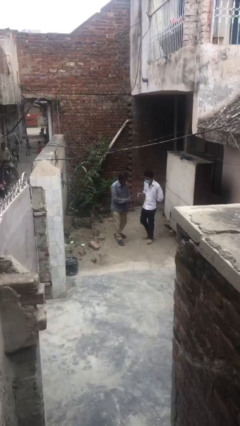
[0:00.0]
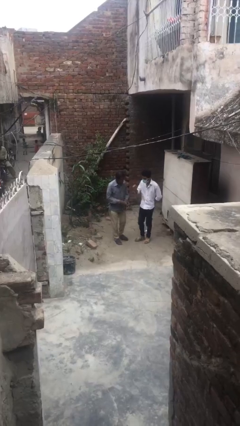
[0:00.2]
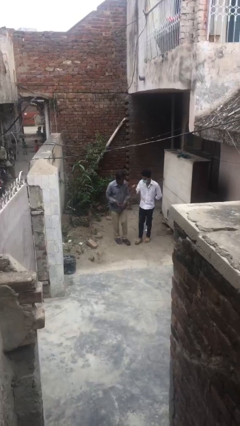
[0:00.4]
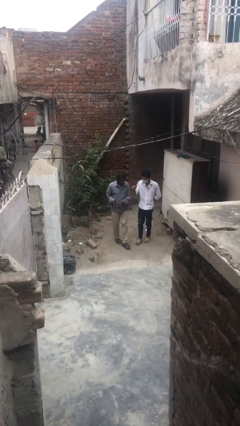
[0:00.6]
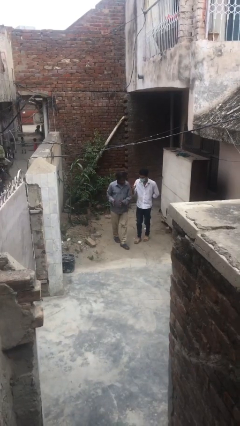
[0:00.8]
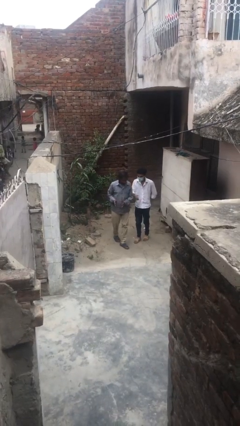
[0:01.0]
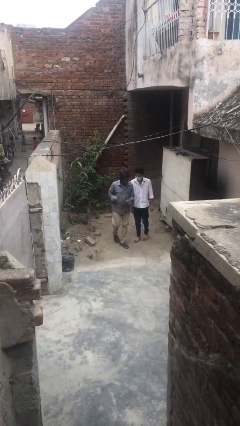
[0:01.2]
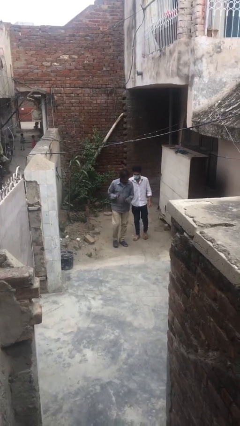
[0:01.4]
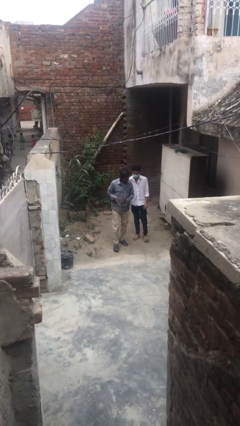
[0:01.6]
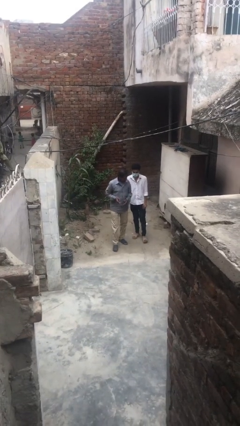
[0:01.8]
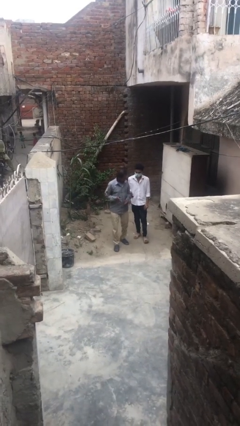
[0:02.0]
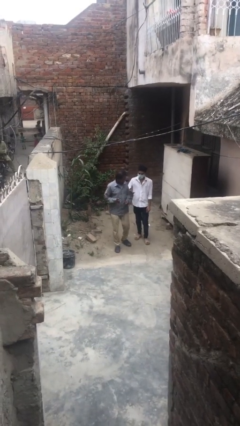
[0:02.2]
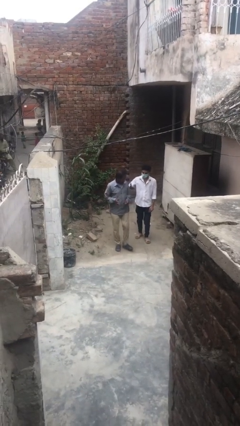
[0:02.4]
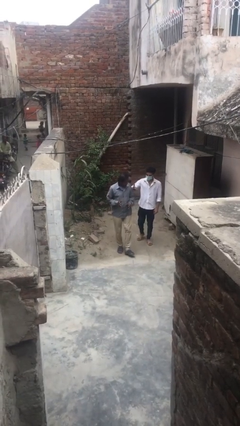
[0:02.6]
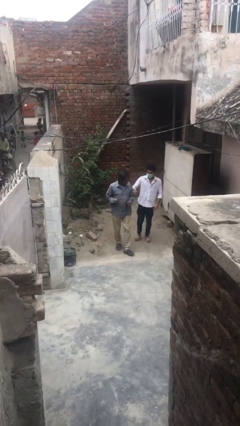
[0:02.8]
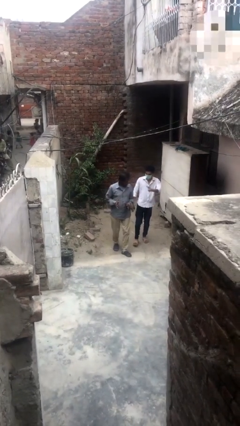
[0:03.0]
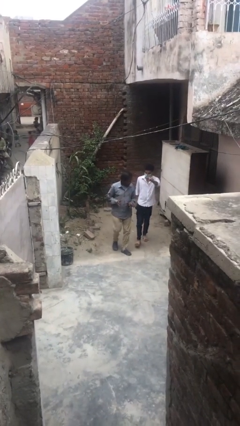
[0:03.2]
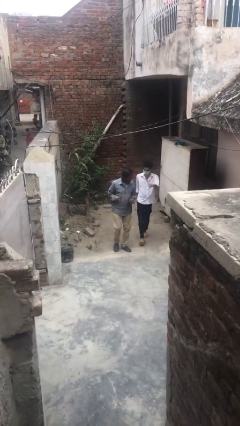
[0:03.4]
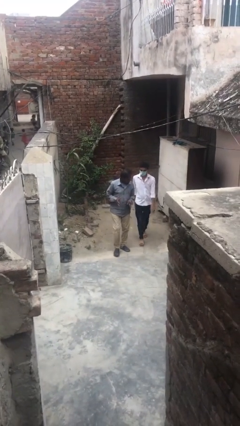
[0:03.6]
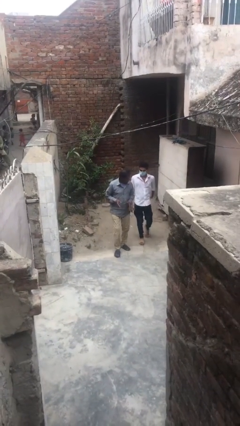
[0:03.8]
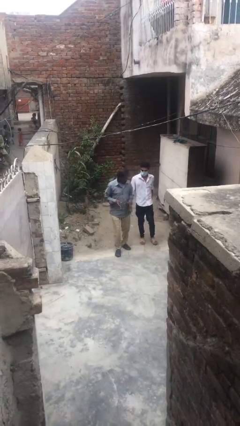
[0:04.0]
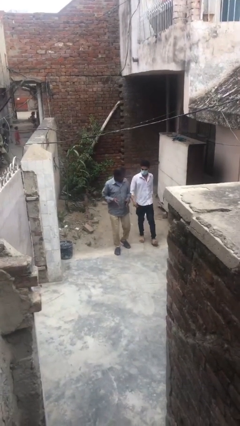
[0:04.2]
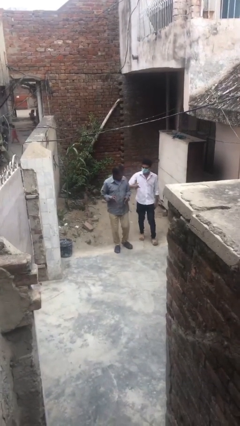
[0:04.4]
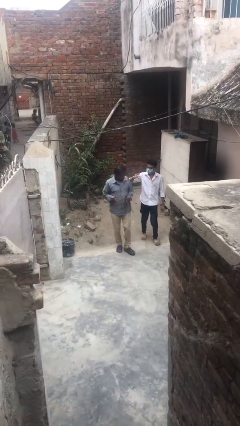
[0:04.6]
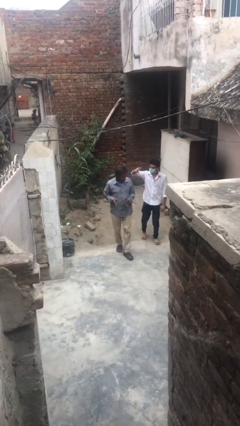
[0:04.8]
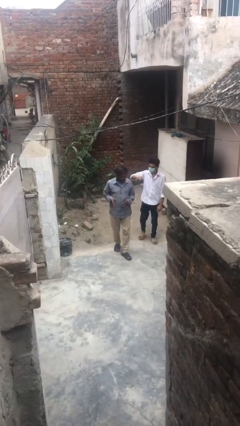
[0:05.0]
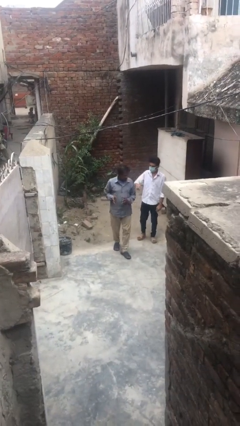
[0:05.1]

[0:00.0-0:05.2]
person talks to person

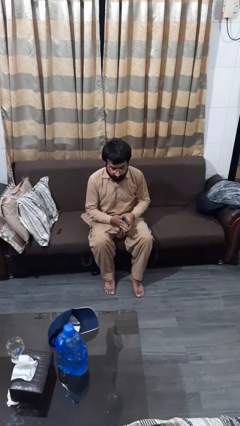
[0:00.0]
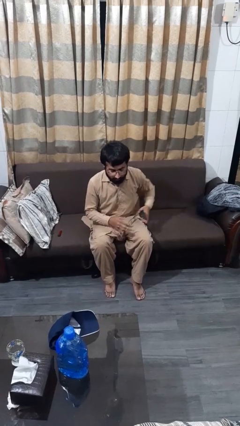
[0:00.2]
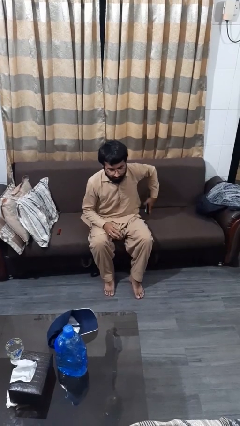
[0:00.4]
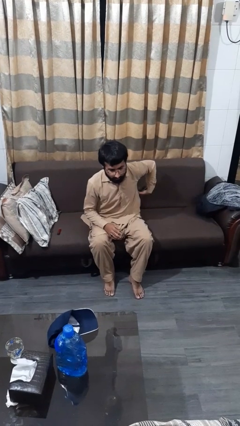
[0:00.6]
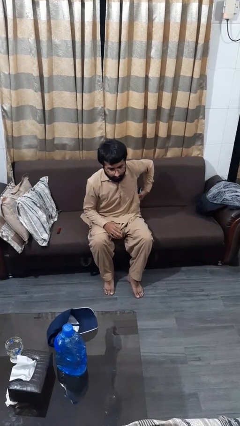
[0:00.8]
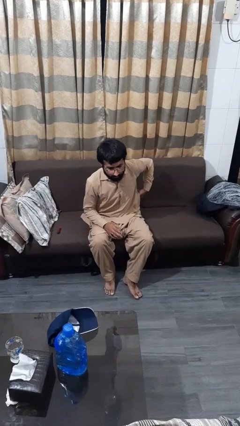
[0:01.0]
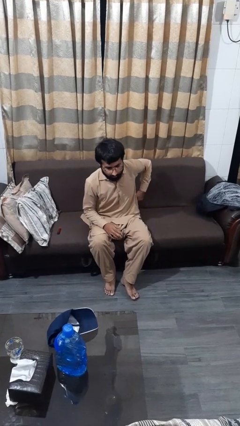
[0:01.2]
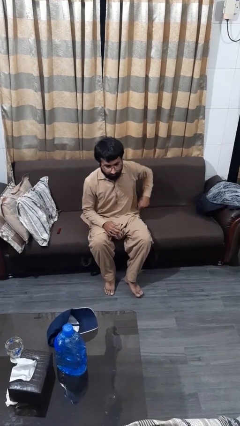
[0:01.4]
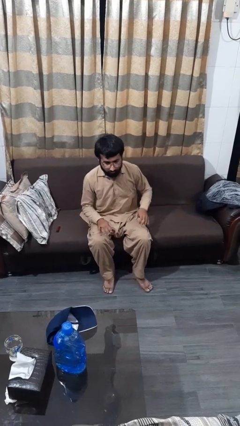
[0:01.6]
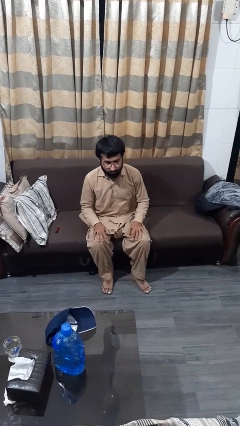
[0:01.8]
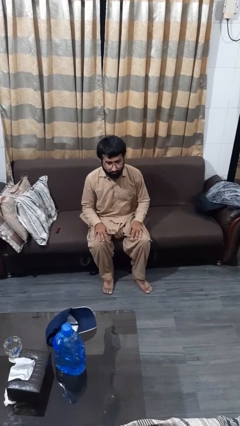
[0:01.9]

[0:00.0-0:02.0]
person puts phone into pocket

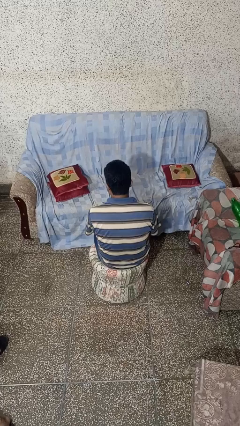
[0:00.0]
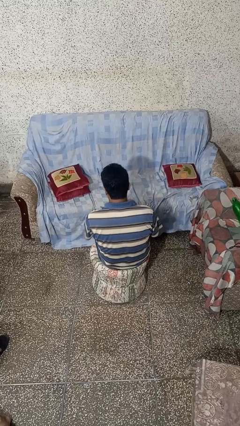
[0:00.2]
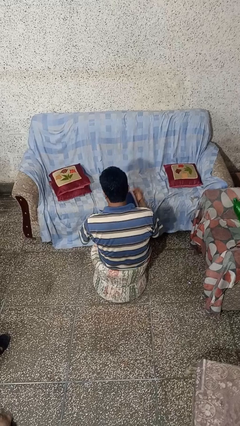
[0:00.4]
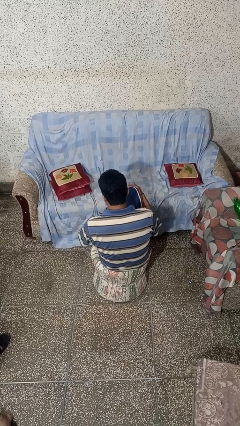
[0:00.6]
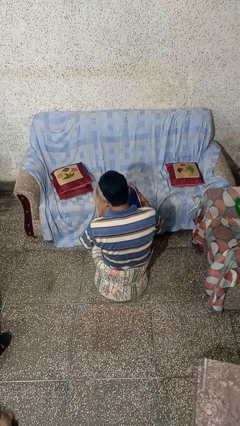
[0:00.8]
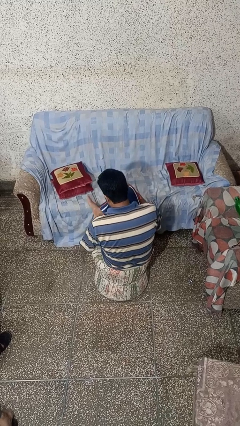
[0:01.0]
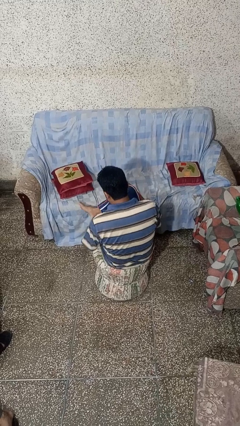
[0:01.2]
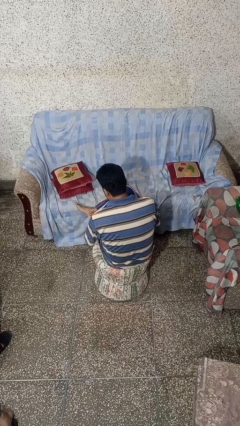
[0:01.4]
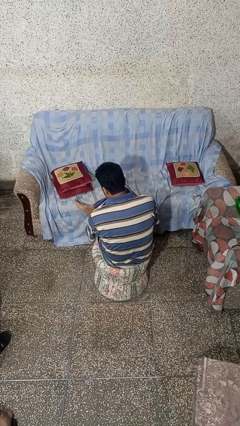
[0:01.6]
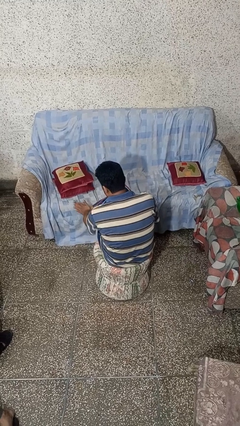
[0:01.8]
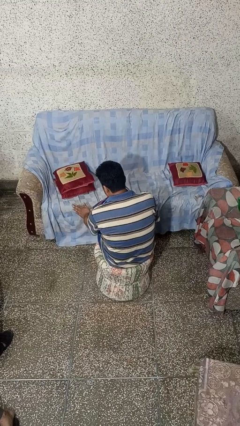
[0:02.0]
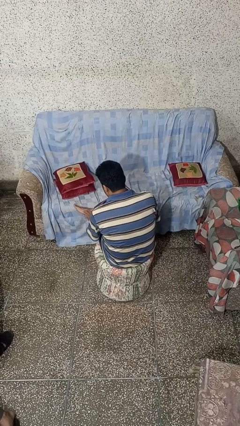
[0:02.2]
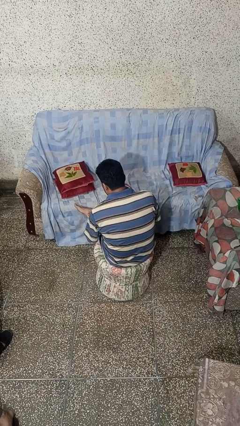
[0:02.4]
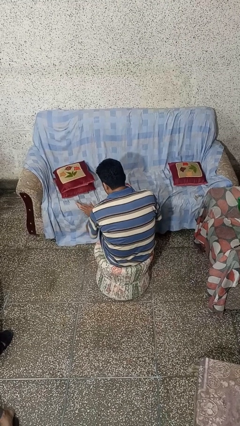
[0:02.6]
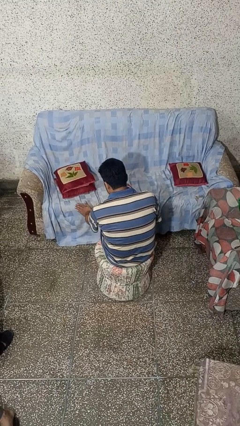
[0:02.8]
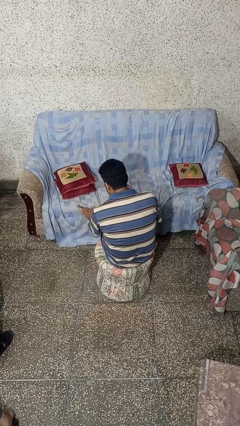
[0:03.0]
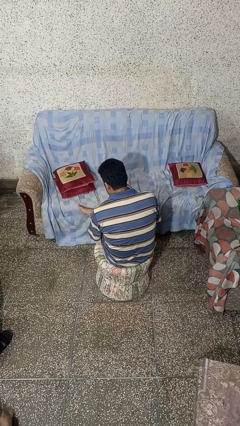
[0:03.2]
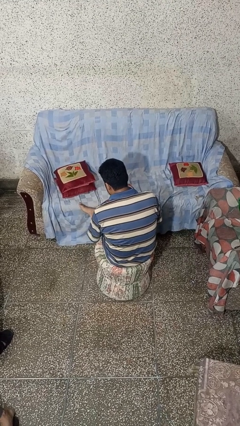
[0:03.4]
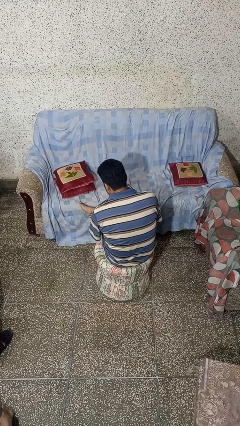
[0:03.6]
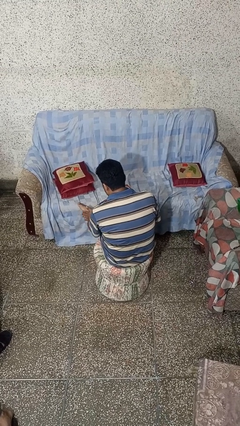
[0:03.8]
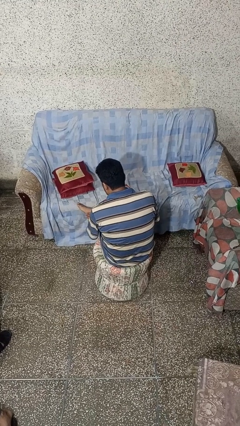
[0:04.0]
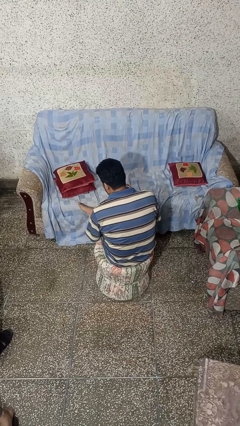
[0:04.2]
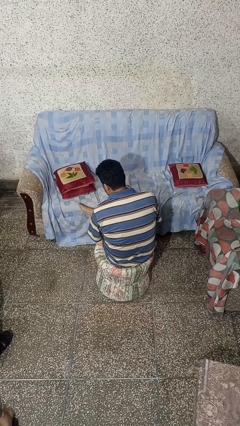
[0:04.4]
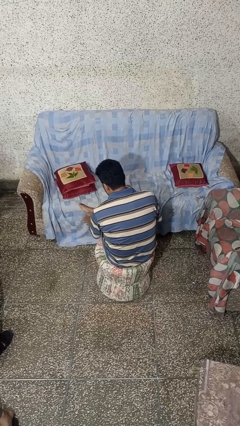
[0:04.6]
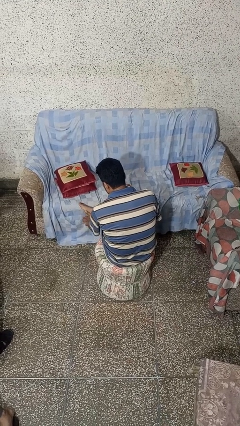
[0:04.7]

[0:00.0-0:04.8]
person rubs foot

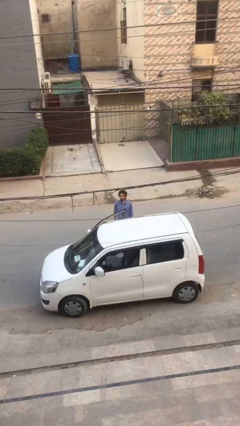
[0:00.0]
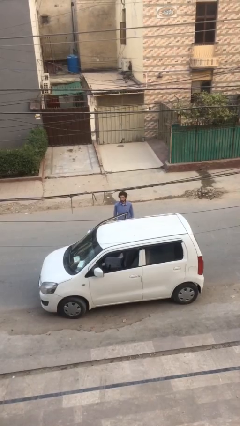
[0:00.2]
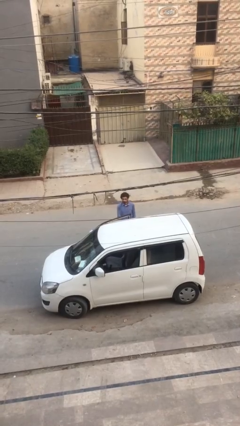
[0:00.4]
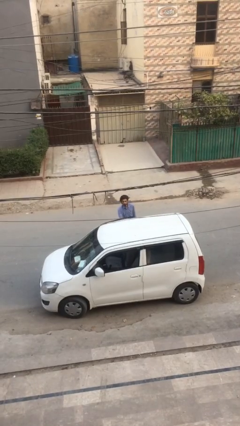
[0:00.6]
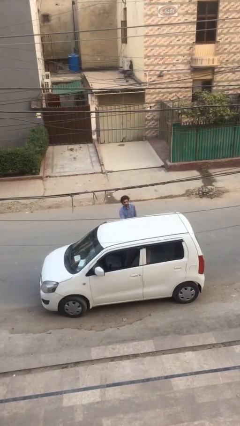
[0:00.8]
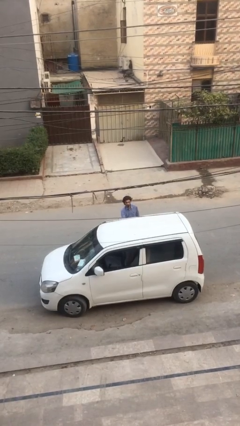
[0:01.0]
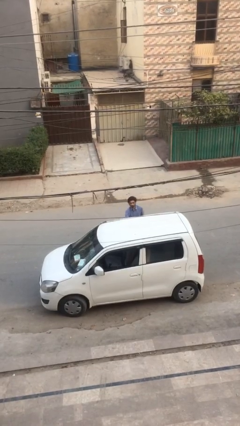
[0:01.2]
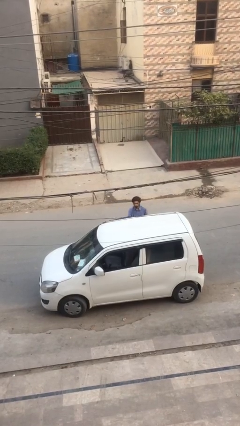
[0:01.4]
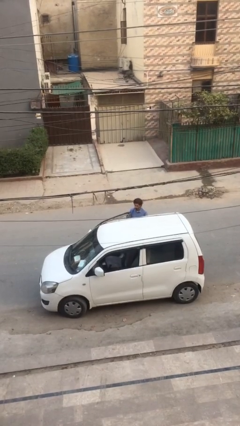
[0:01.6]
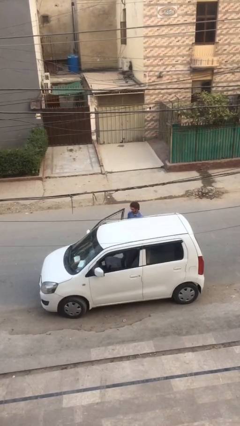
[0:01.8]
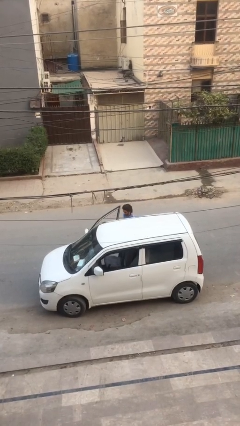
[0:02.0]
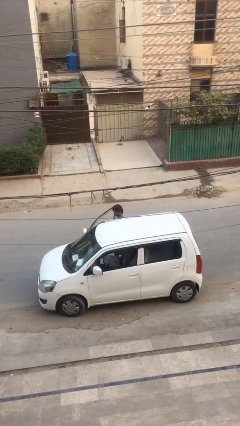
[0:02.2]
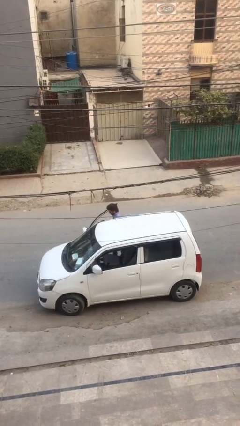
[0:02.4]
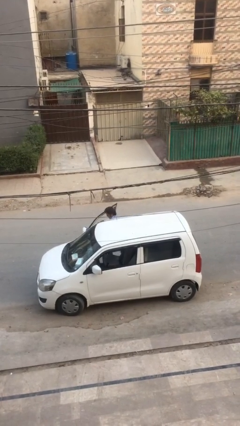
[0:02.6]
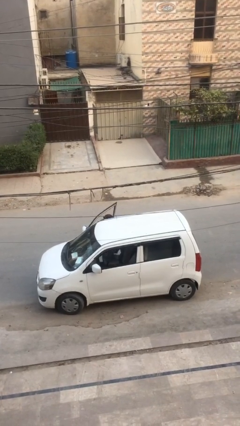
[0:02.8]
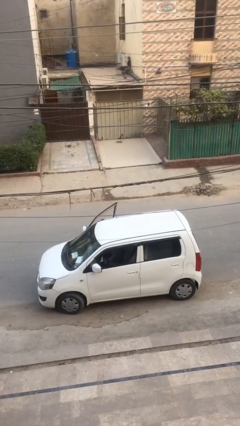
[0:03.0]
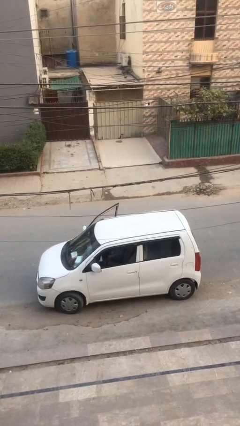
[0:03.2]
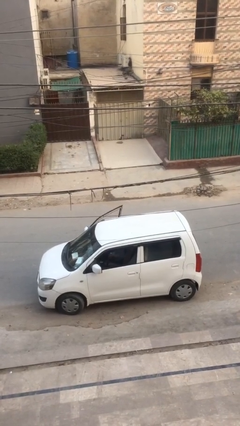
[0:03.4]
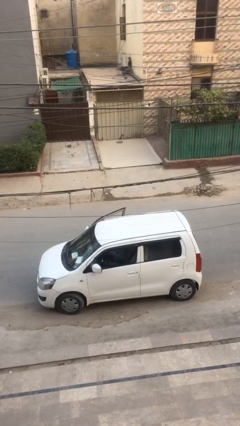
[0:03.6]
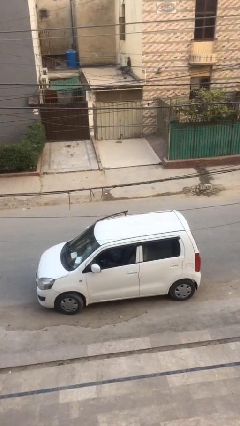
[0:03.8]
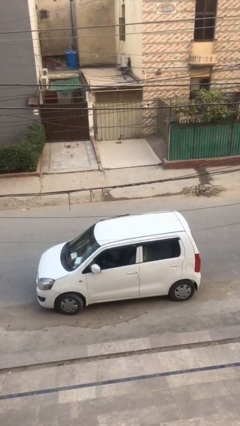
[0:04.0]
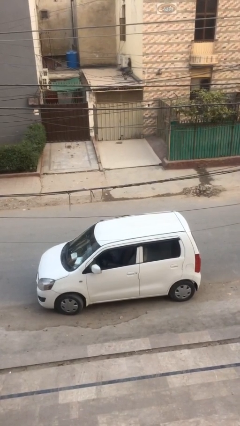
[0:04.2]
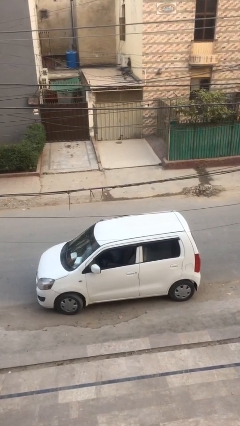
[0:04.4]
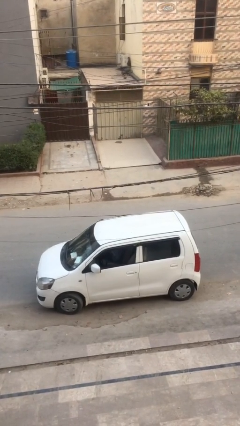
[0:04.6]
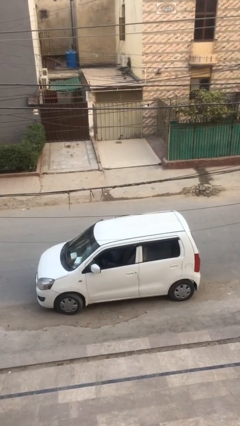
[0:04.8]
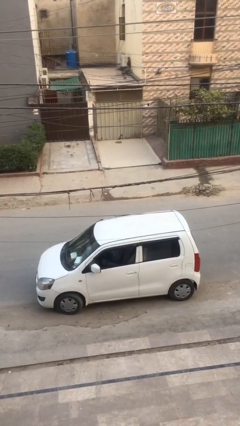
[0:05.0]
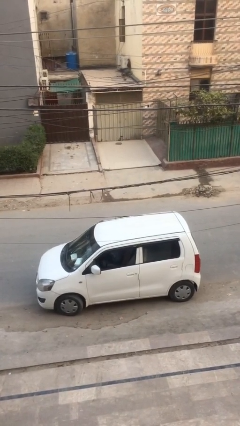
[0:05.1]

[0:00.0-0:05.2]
person enters car

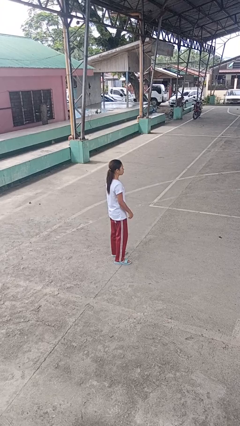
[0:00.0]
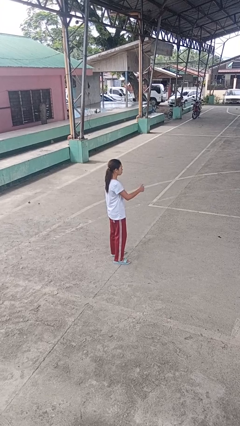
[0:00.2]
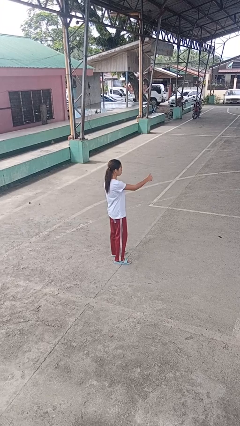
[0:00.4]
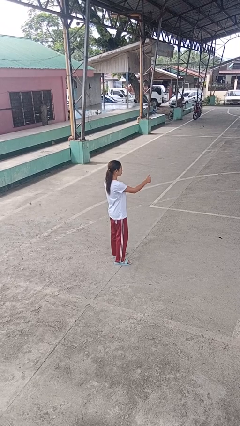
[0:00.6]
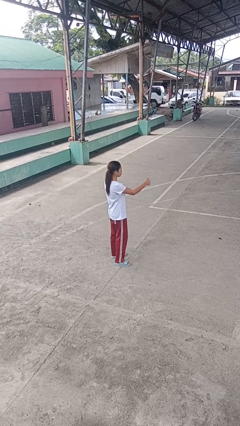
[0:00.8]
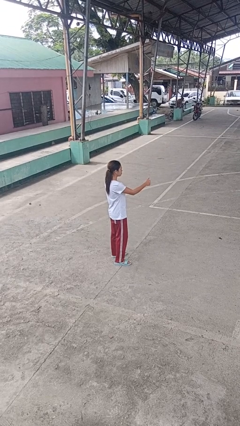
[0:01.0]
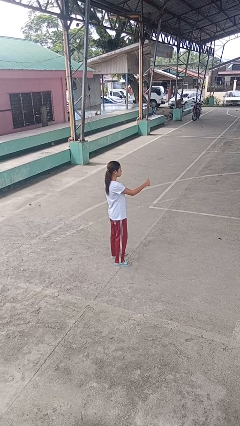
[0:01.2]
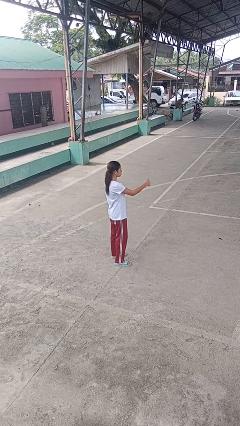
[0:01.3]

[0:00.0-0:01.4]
person gestures thumbs up
